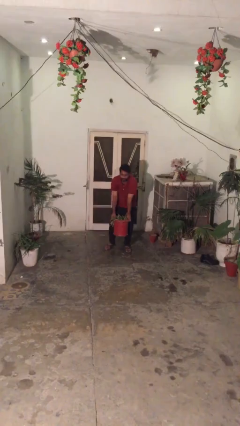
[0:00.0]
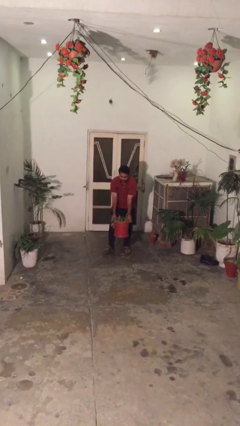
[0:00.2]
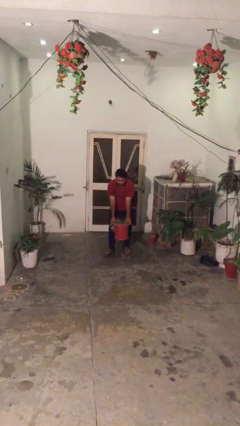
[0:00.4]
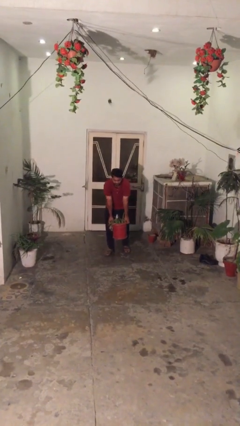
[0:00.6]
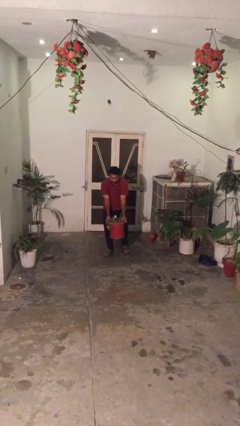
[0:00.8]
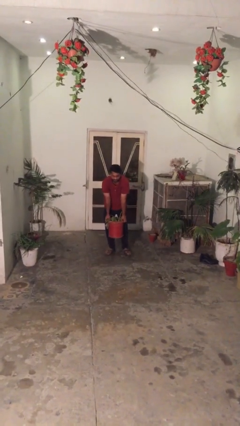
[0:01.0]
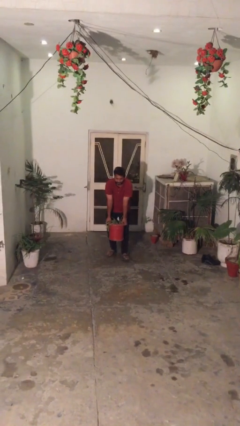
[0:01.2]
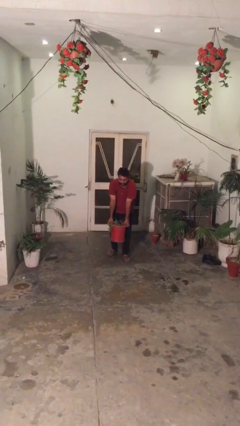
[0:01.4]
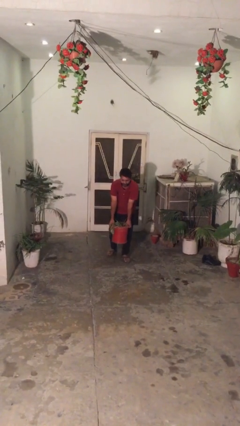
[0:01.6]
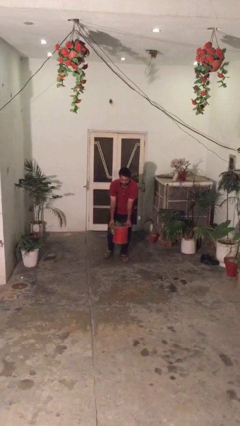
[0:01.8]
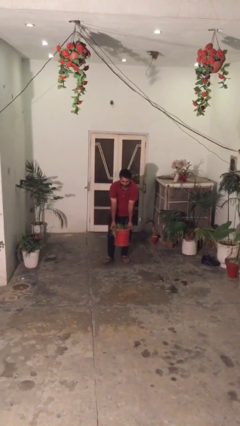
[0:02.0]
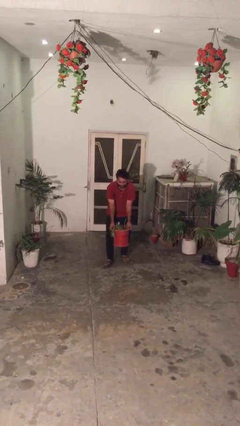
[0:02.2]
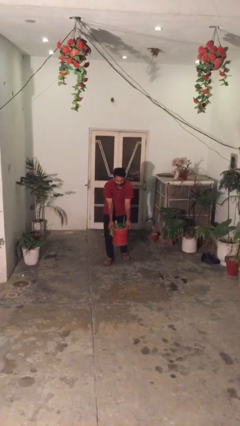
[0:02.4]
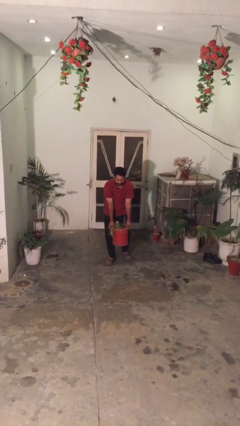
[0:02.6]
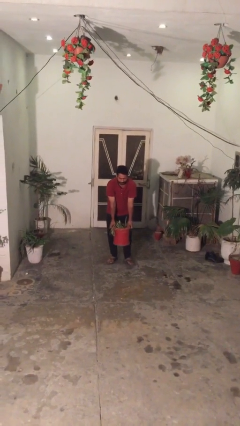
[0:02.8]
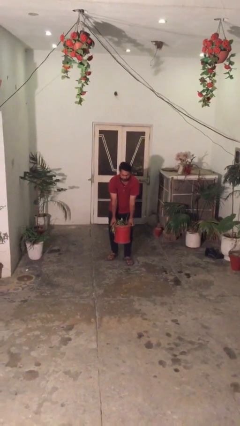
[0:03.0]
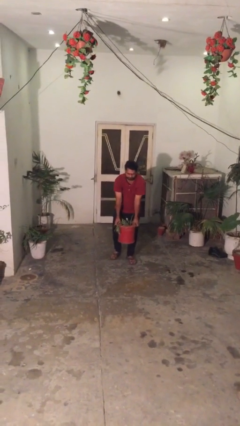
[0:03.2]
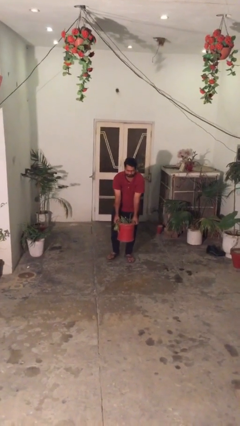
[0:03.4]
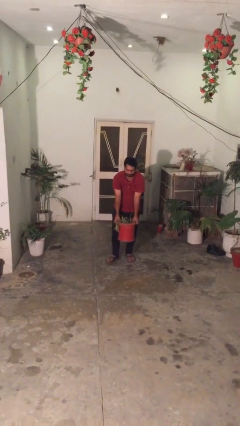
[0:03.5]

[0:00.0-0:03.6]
person carries heavy object

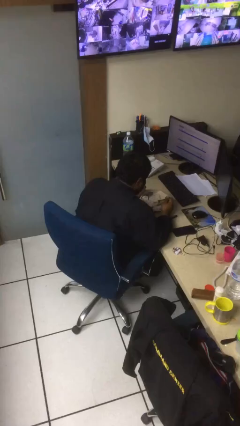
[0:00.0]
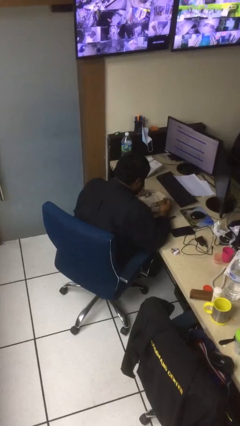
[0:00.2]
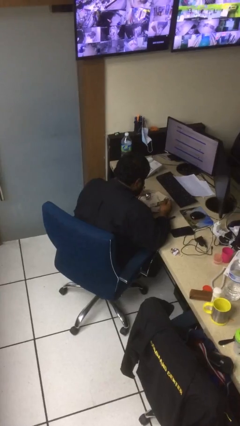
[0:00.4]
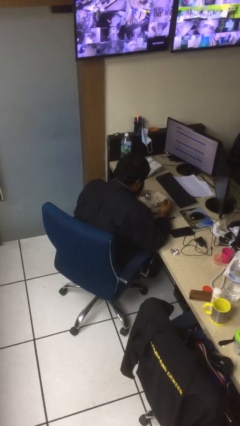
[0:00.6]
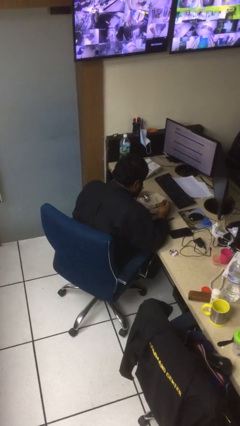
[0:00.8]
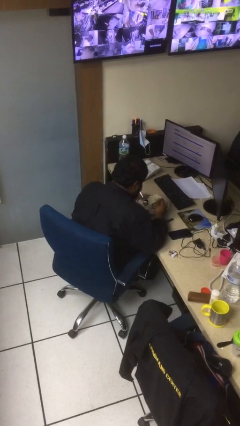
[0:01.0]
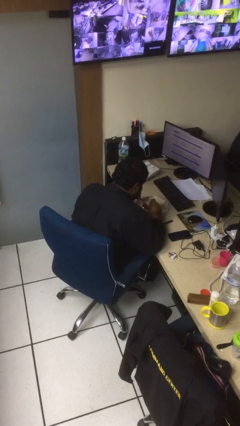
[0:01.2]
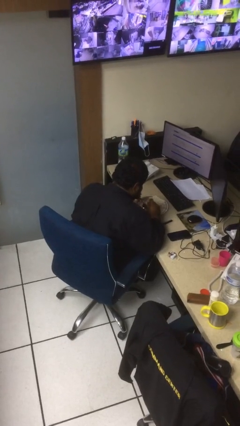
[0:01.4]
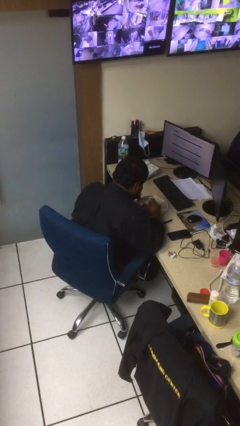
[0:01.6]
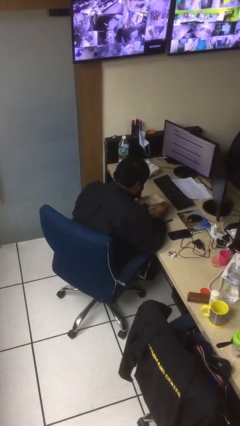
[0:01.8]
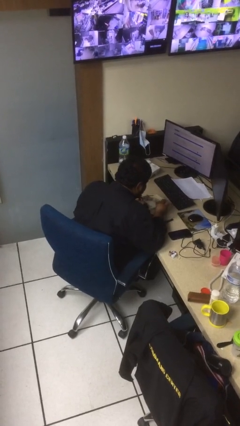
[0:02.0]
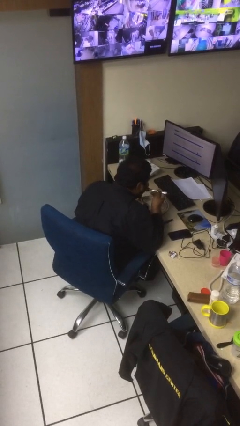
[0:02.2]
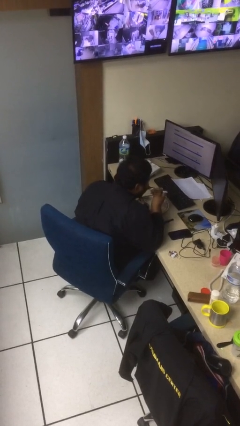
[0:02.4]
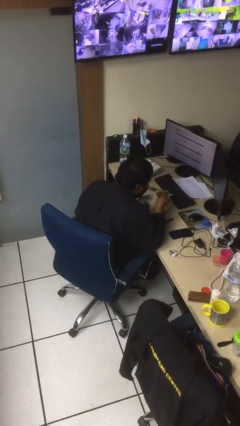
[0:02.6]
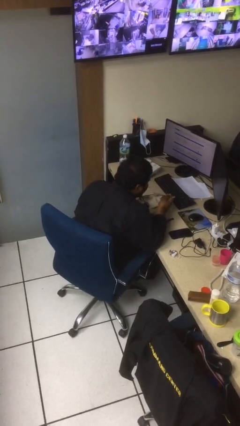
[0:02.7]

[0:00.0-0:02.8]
person eats with utensil

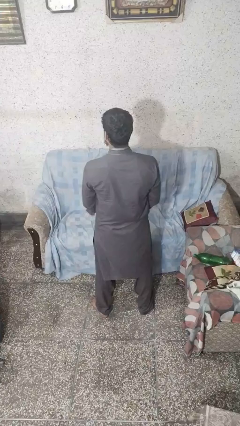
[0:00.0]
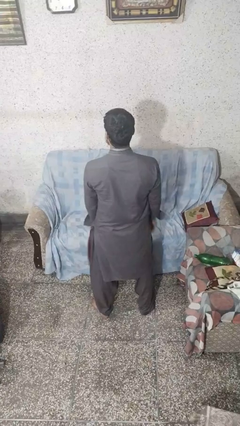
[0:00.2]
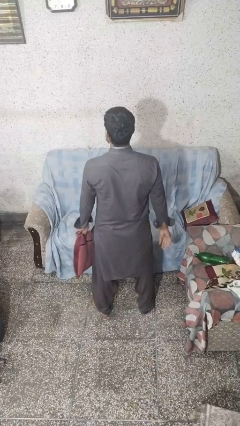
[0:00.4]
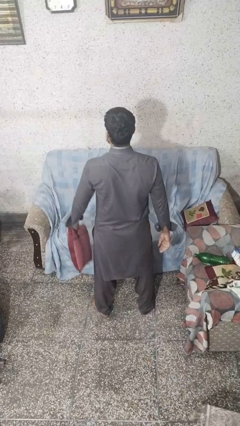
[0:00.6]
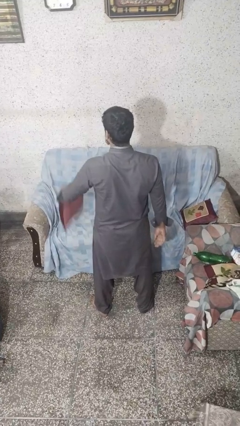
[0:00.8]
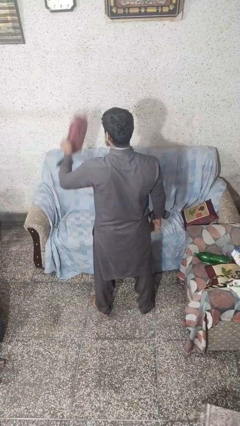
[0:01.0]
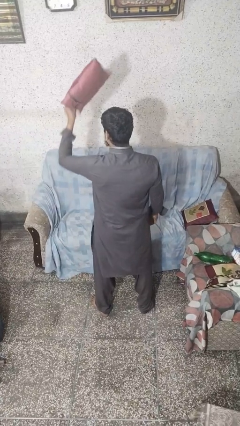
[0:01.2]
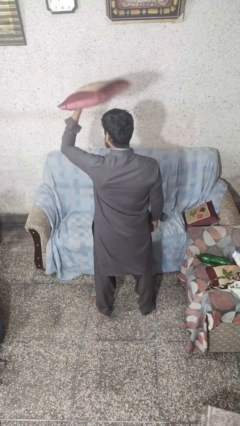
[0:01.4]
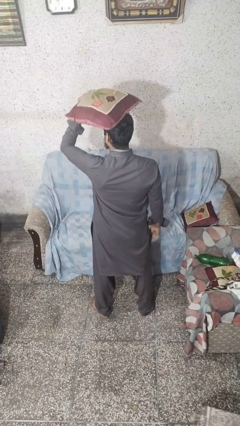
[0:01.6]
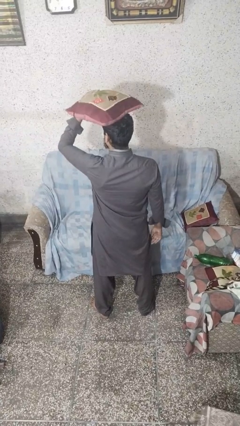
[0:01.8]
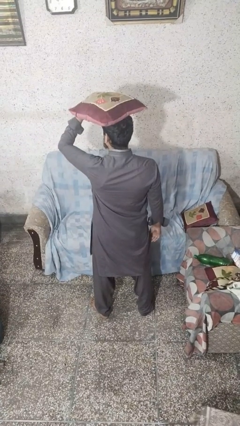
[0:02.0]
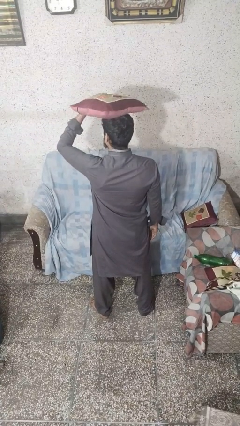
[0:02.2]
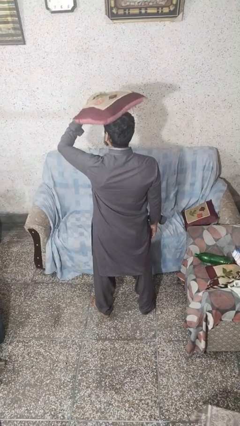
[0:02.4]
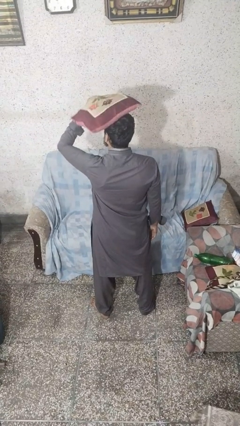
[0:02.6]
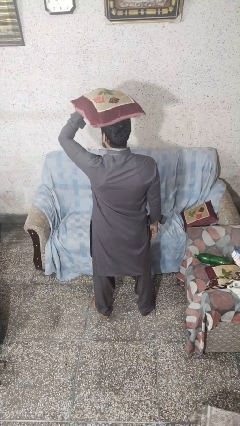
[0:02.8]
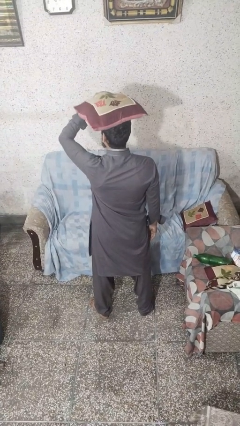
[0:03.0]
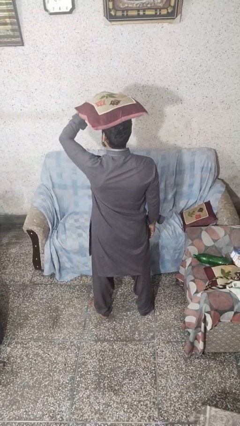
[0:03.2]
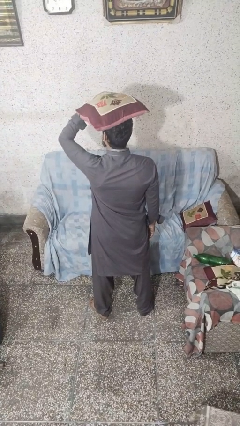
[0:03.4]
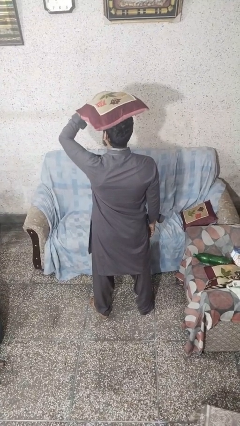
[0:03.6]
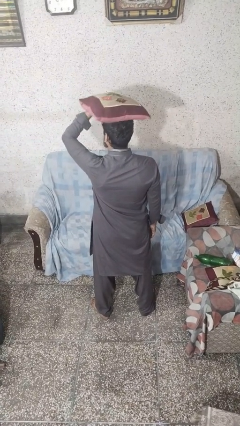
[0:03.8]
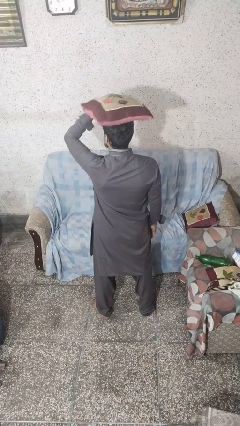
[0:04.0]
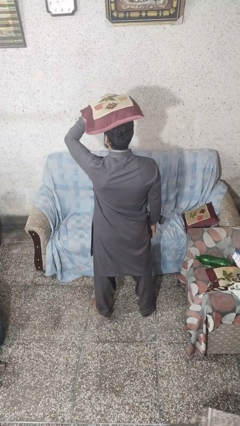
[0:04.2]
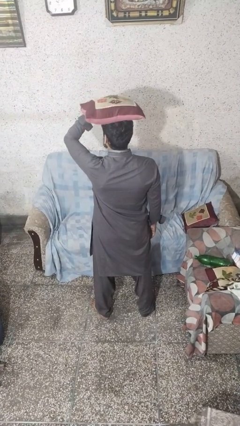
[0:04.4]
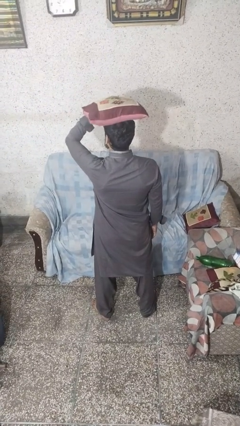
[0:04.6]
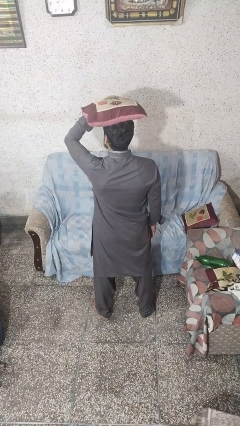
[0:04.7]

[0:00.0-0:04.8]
person holds object above head

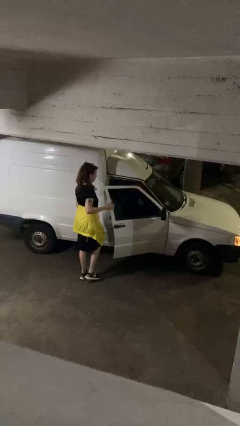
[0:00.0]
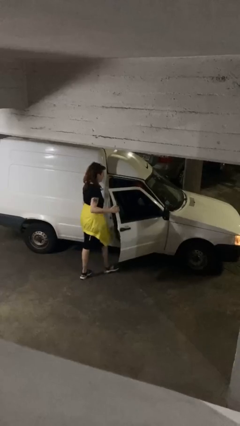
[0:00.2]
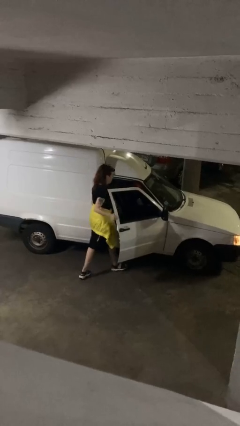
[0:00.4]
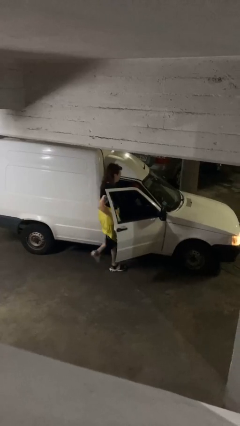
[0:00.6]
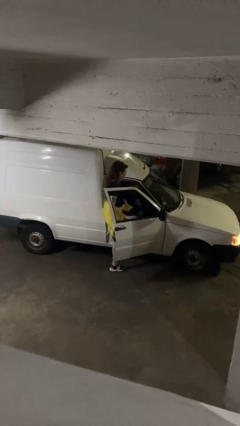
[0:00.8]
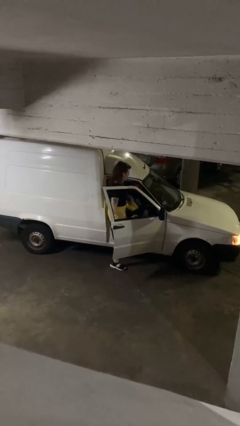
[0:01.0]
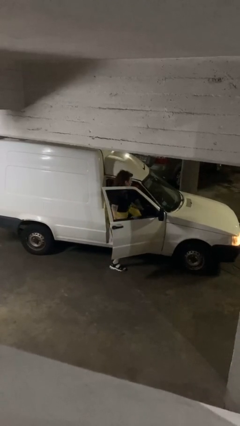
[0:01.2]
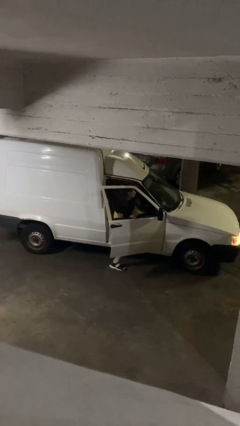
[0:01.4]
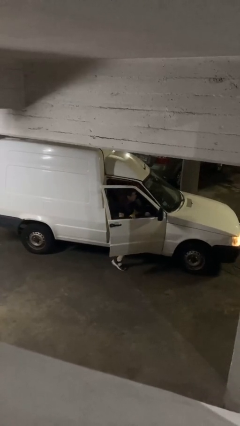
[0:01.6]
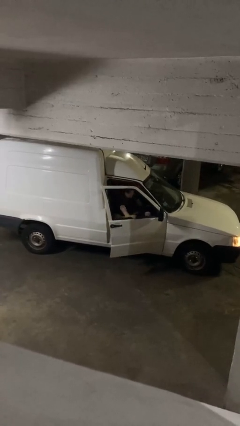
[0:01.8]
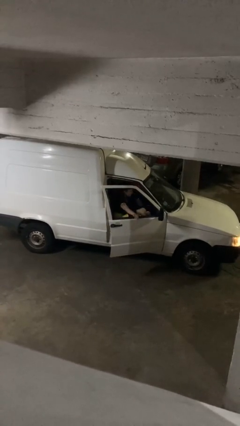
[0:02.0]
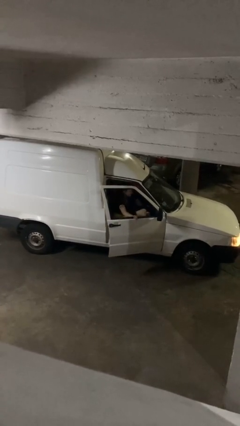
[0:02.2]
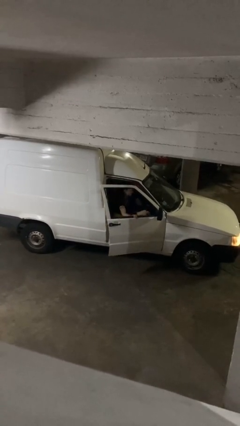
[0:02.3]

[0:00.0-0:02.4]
car picks up person

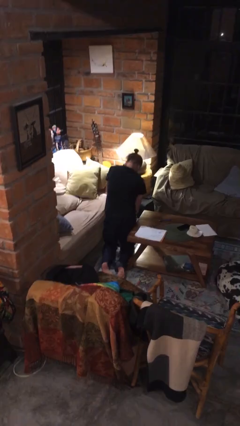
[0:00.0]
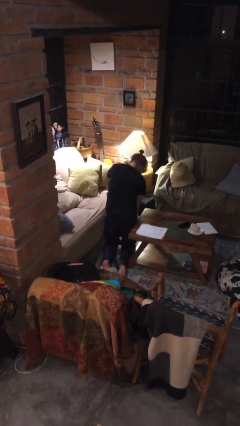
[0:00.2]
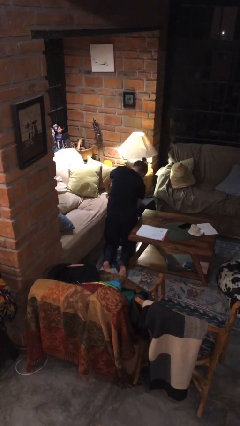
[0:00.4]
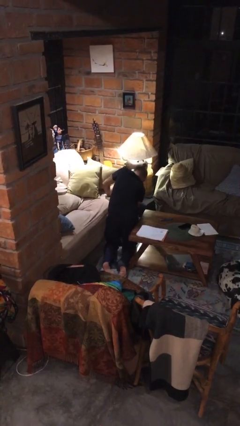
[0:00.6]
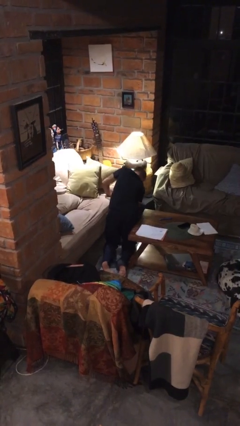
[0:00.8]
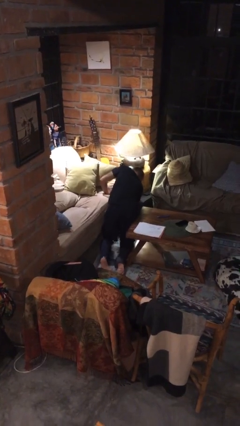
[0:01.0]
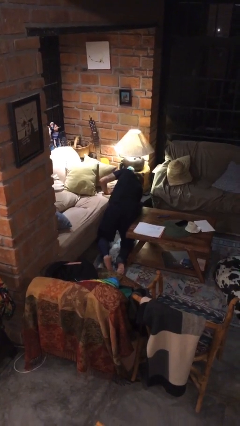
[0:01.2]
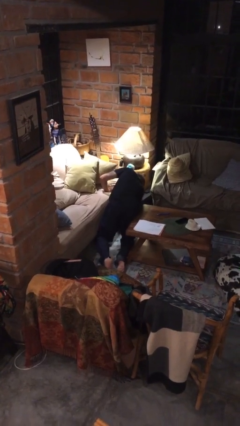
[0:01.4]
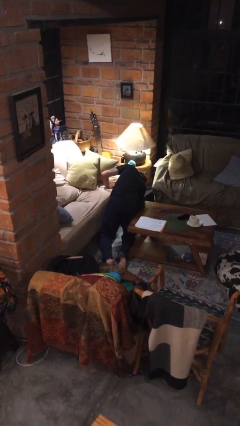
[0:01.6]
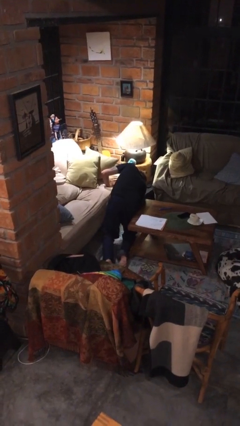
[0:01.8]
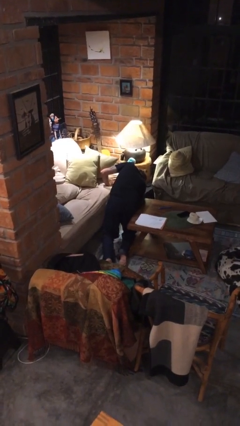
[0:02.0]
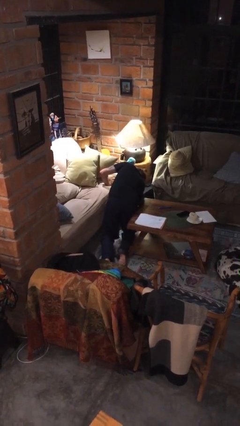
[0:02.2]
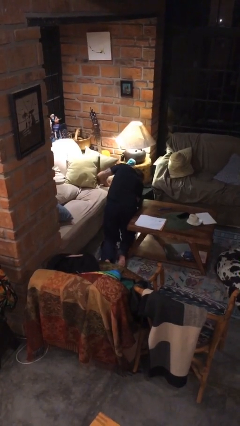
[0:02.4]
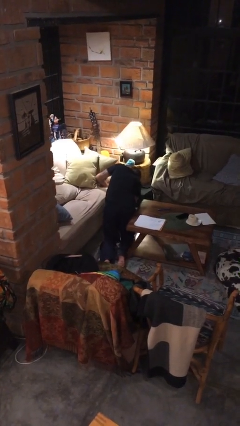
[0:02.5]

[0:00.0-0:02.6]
person searches under couch

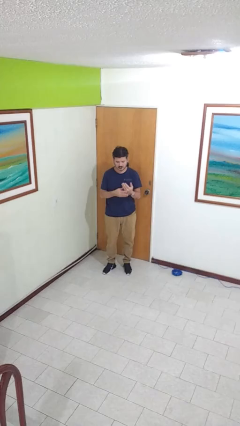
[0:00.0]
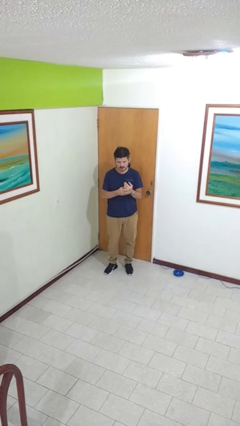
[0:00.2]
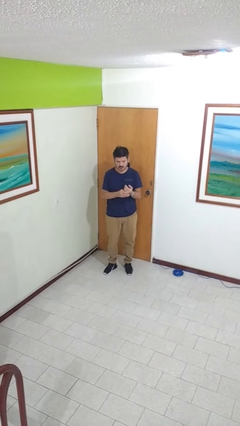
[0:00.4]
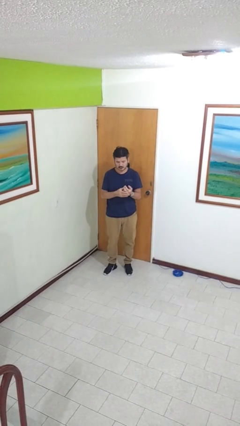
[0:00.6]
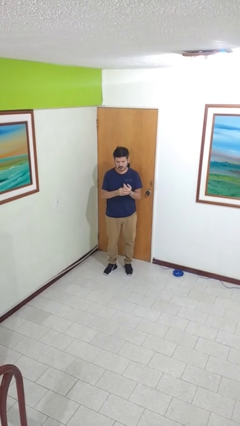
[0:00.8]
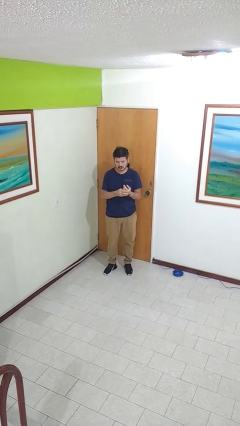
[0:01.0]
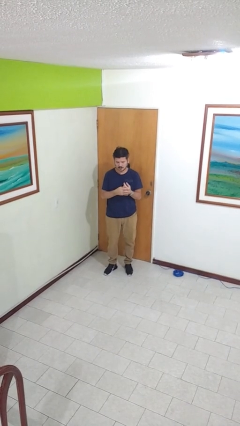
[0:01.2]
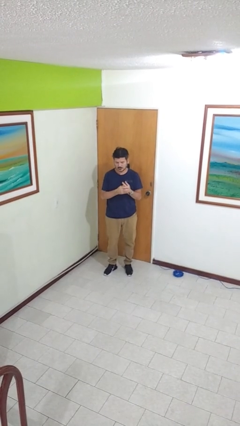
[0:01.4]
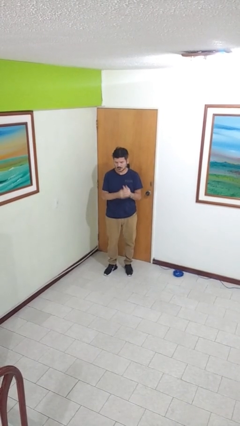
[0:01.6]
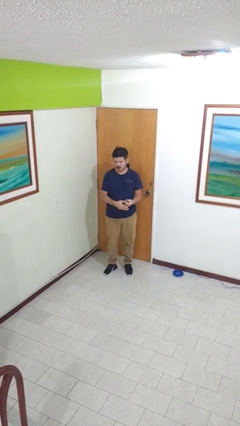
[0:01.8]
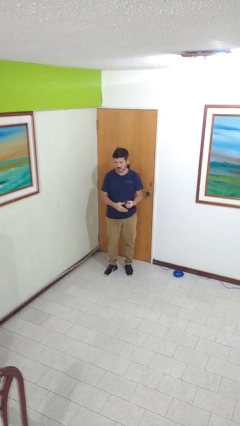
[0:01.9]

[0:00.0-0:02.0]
person cracks knuckles
